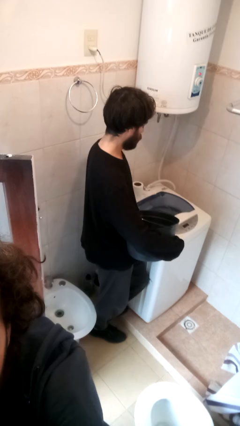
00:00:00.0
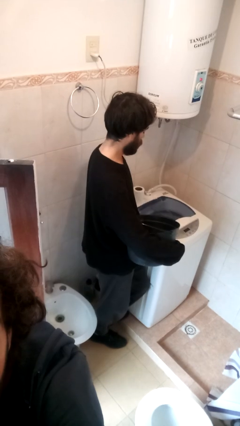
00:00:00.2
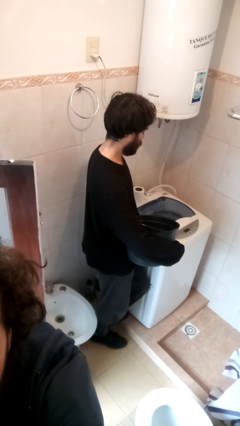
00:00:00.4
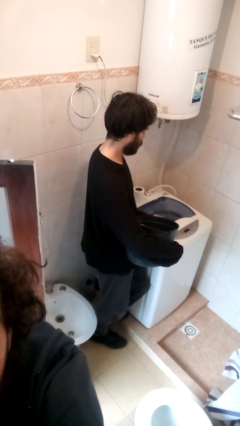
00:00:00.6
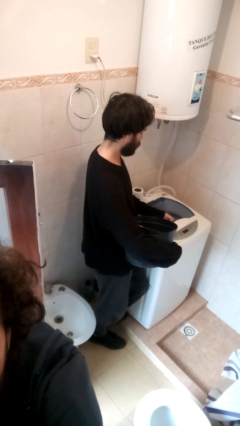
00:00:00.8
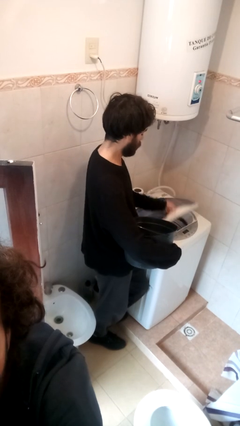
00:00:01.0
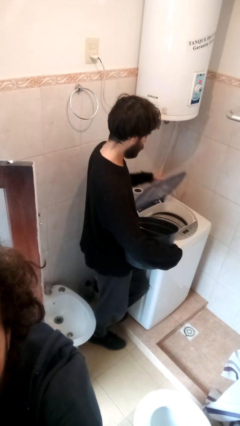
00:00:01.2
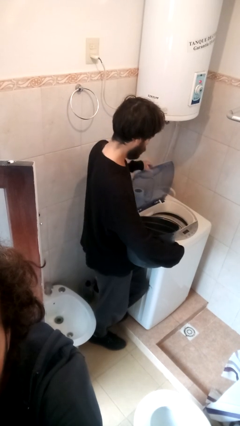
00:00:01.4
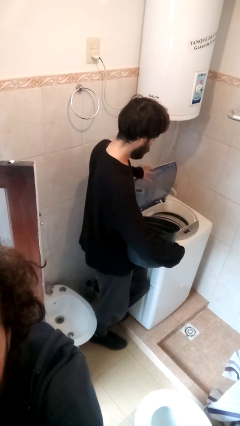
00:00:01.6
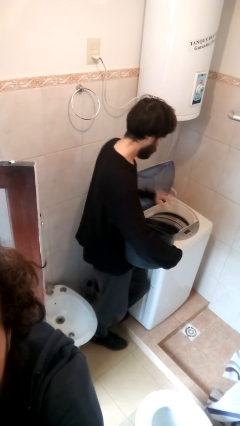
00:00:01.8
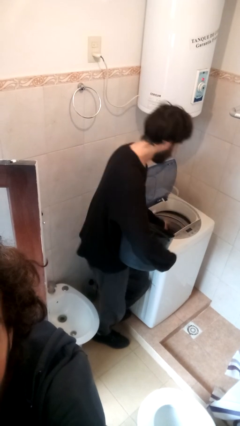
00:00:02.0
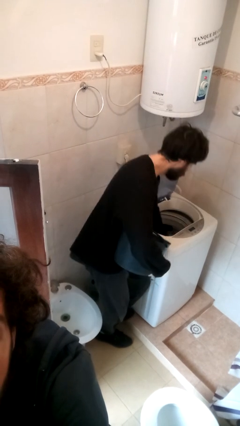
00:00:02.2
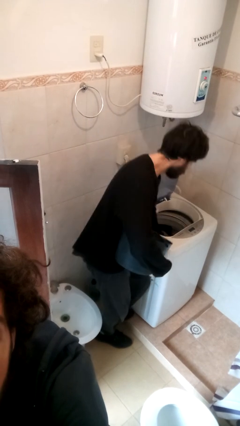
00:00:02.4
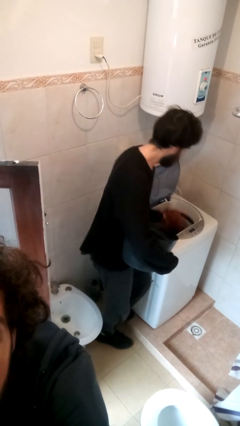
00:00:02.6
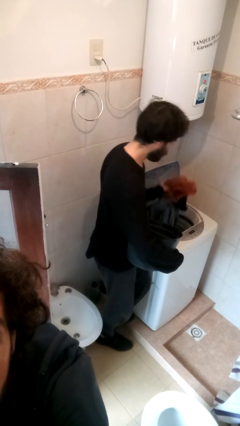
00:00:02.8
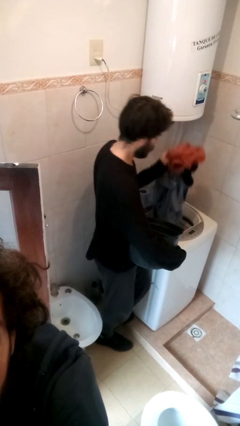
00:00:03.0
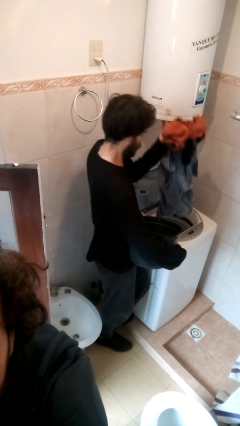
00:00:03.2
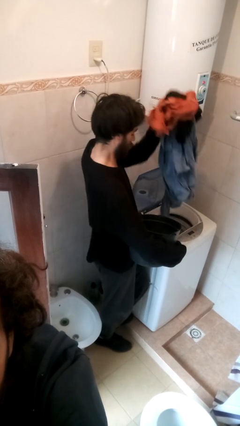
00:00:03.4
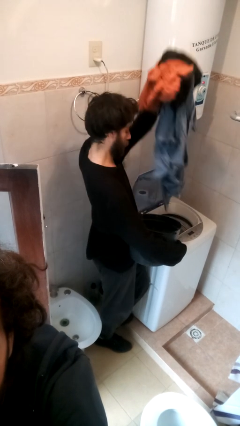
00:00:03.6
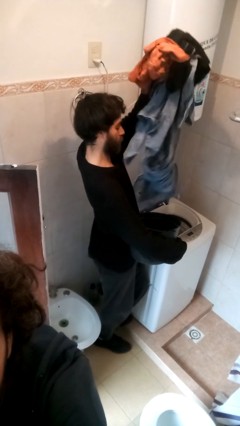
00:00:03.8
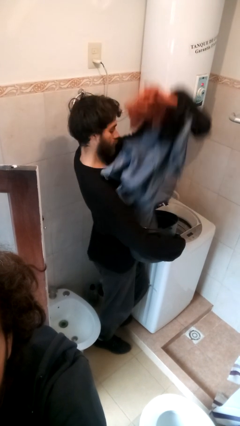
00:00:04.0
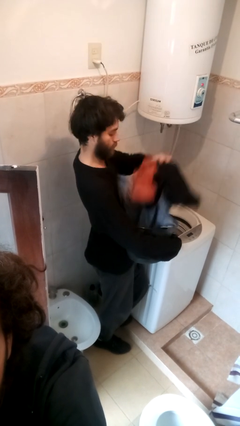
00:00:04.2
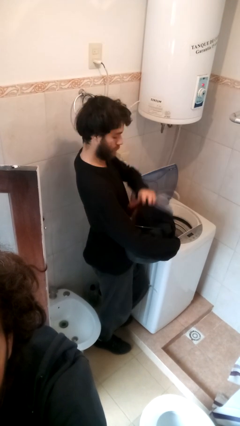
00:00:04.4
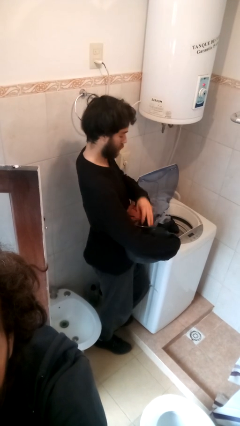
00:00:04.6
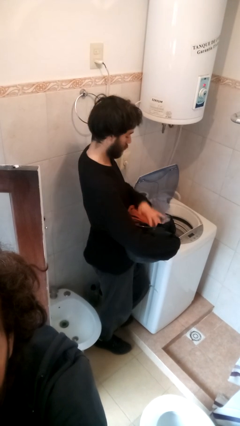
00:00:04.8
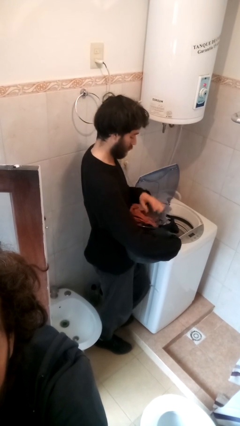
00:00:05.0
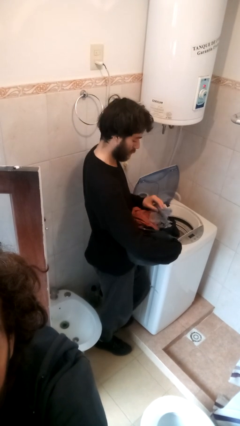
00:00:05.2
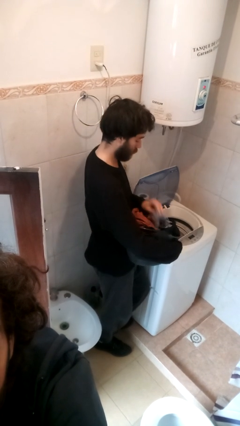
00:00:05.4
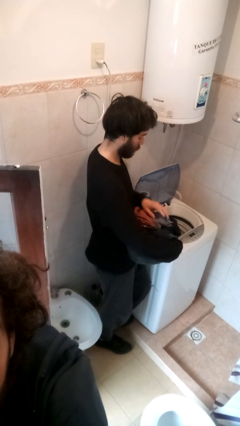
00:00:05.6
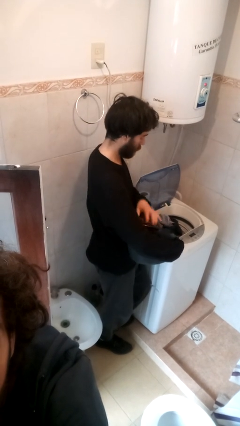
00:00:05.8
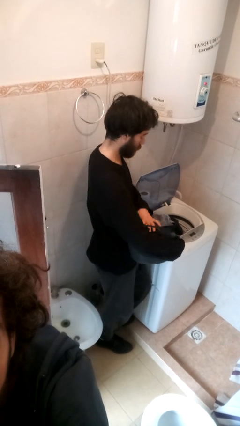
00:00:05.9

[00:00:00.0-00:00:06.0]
person loads clotheswasher

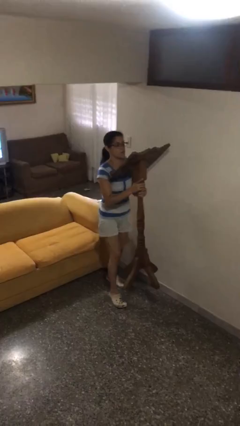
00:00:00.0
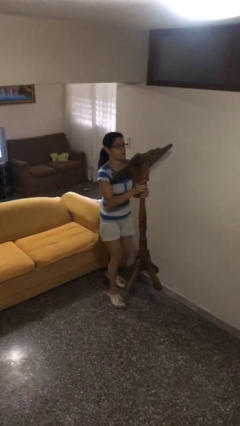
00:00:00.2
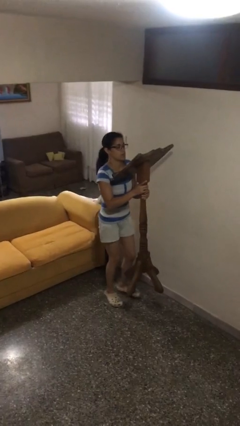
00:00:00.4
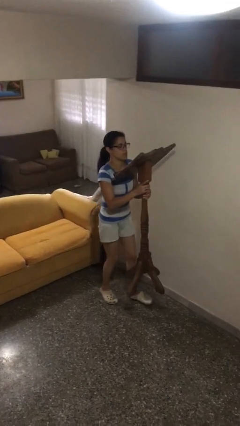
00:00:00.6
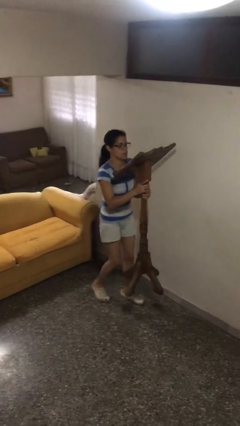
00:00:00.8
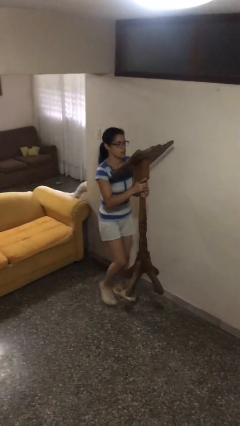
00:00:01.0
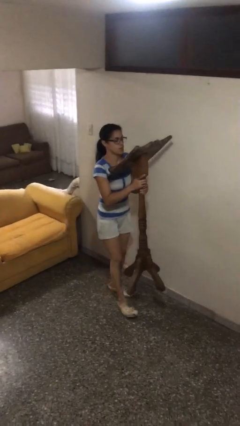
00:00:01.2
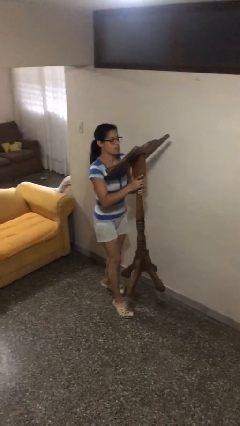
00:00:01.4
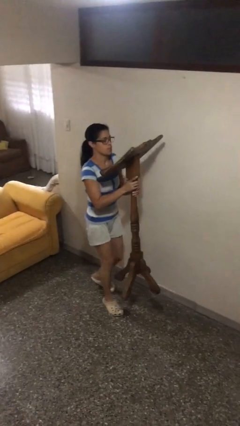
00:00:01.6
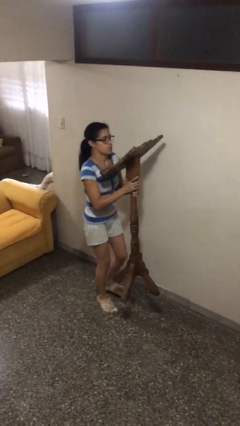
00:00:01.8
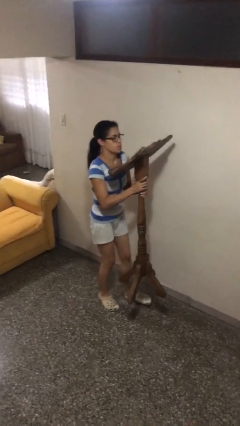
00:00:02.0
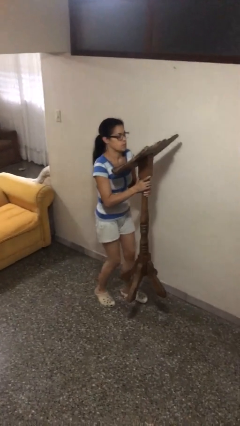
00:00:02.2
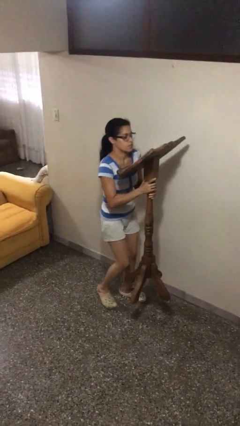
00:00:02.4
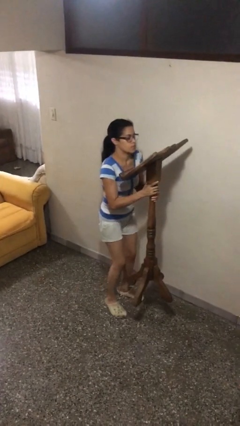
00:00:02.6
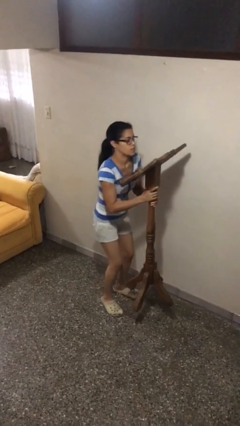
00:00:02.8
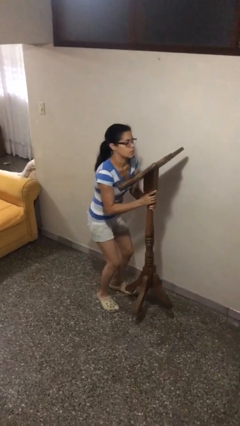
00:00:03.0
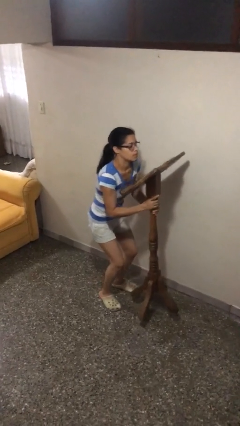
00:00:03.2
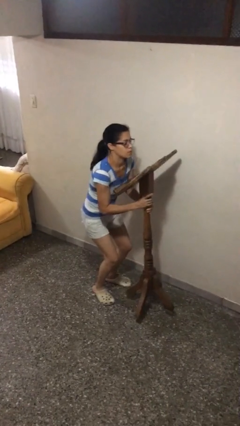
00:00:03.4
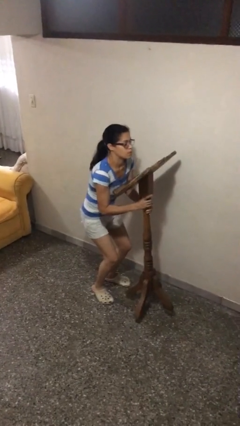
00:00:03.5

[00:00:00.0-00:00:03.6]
person carries heavy object

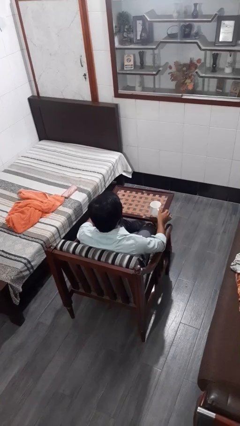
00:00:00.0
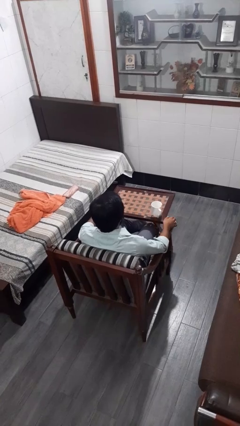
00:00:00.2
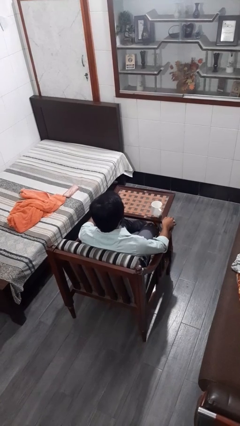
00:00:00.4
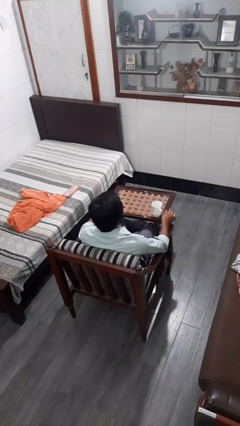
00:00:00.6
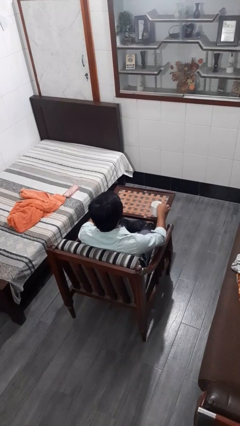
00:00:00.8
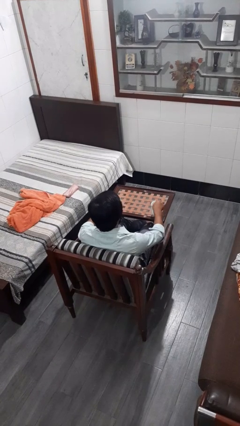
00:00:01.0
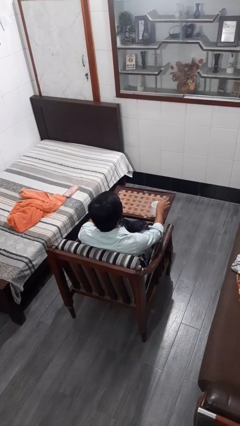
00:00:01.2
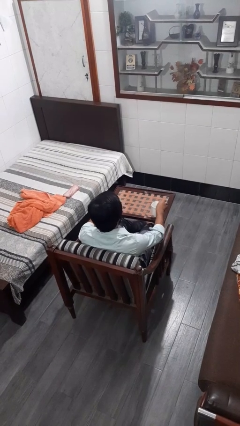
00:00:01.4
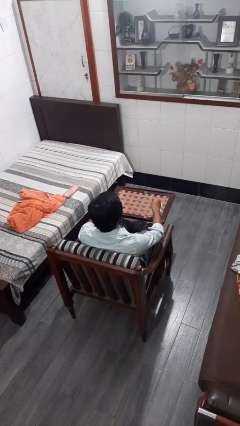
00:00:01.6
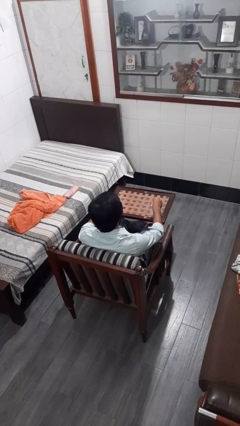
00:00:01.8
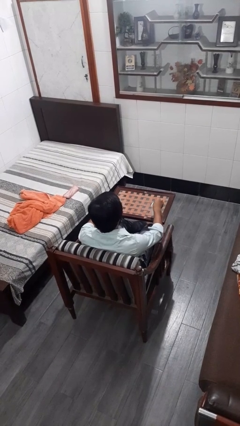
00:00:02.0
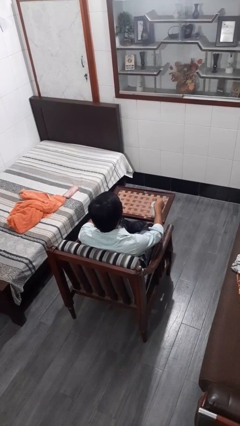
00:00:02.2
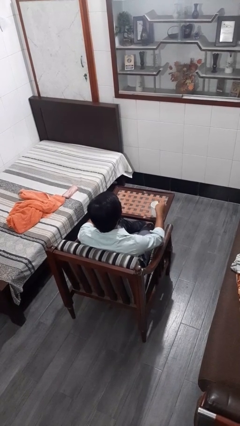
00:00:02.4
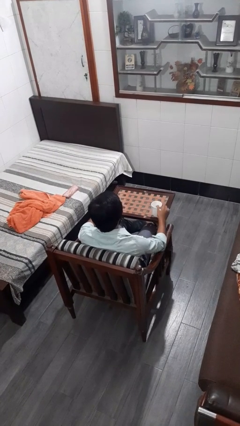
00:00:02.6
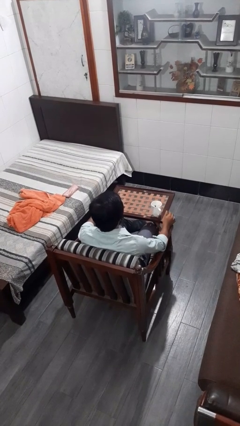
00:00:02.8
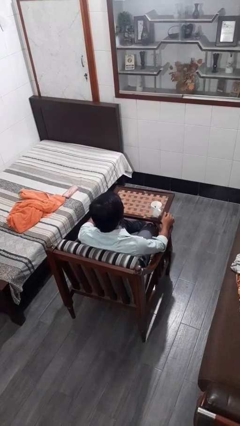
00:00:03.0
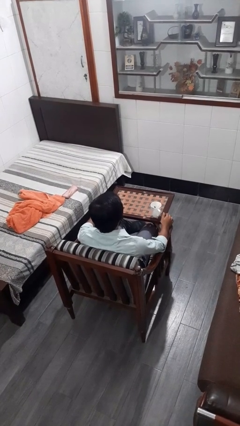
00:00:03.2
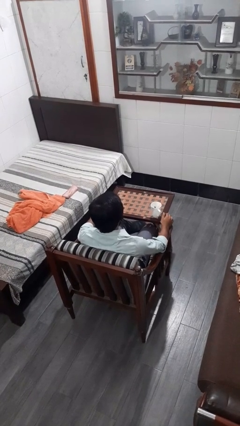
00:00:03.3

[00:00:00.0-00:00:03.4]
person stirs mug

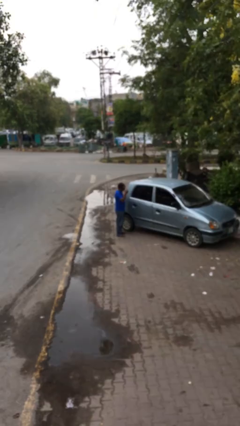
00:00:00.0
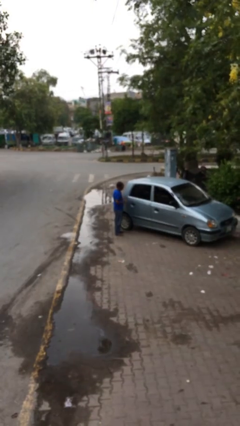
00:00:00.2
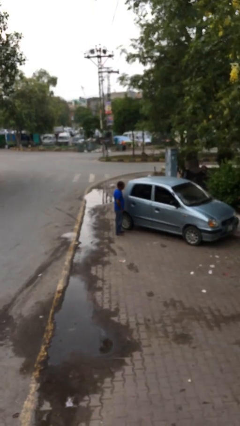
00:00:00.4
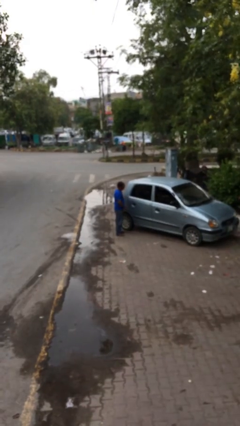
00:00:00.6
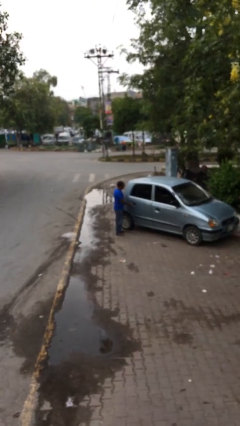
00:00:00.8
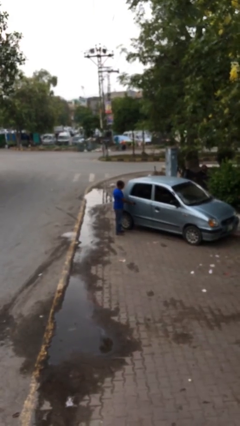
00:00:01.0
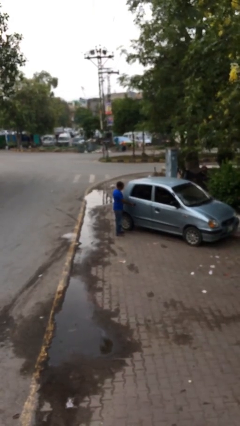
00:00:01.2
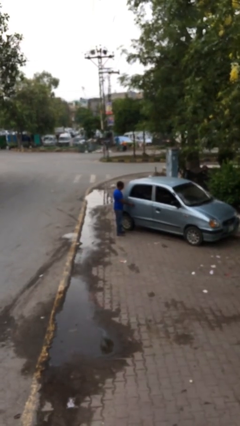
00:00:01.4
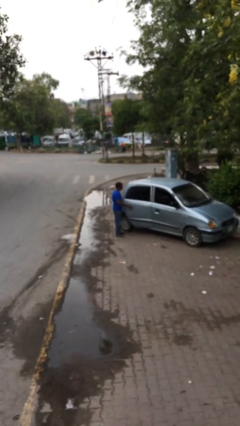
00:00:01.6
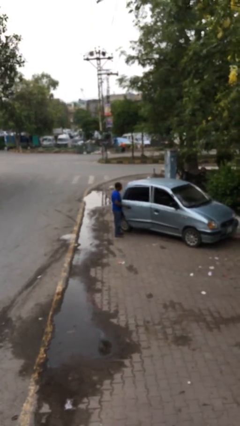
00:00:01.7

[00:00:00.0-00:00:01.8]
person opens car door

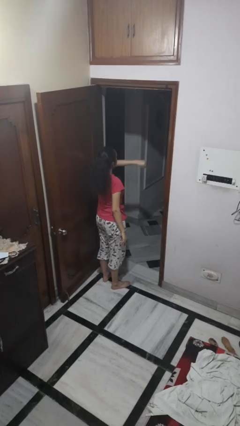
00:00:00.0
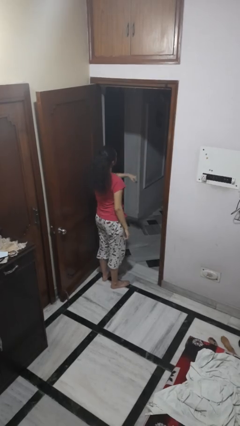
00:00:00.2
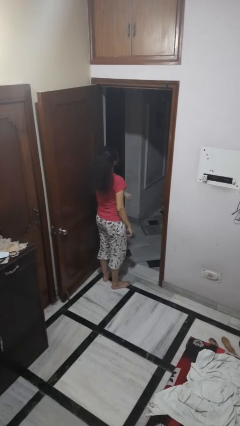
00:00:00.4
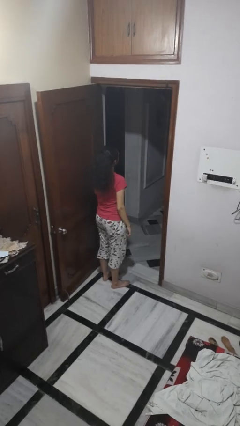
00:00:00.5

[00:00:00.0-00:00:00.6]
person punches

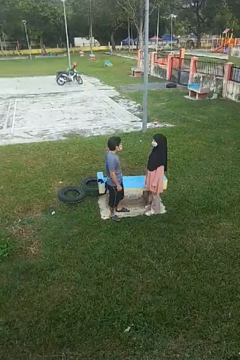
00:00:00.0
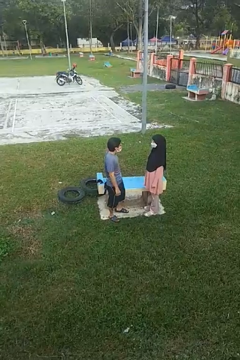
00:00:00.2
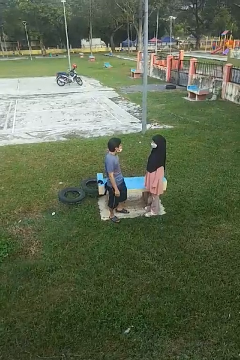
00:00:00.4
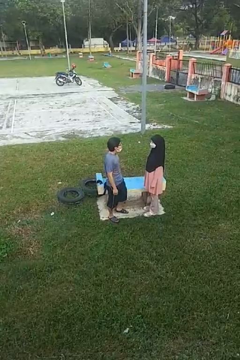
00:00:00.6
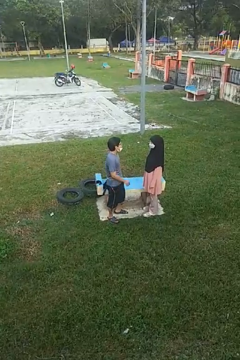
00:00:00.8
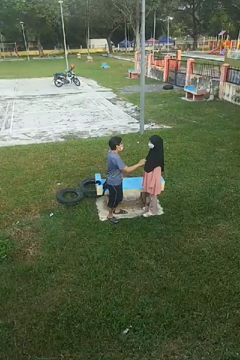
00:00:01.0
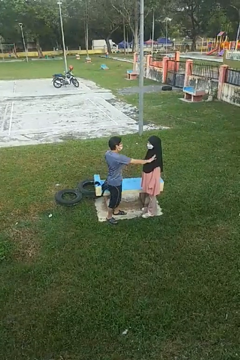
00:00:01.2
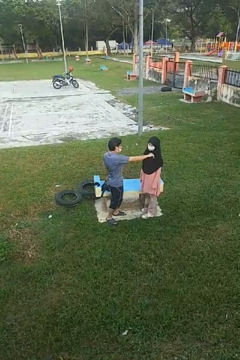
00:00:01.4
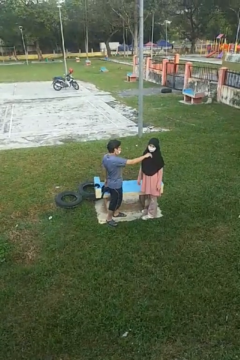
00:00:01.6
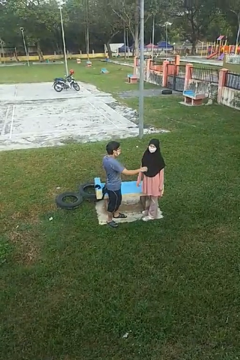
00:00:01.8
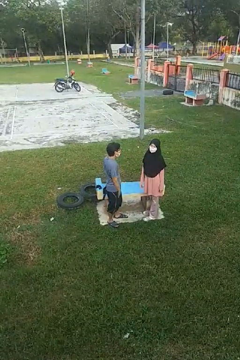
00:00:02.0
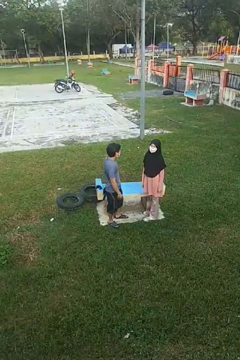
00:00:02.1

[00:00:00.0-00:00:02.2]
person shoves person

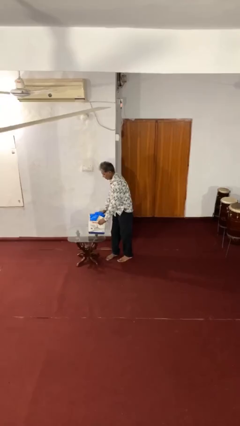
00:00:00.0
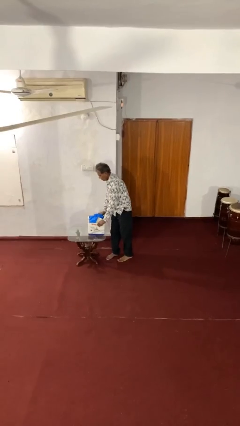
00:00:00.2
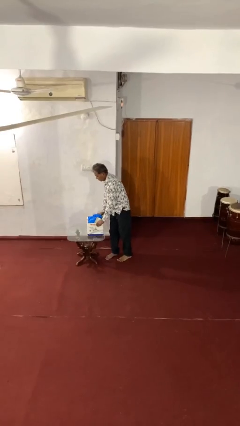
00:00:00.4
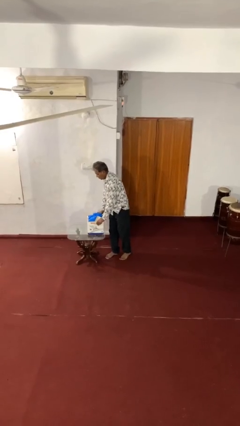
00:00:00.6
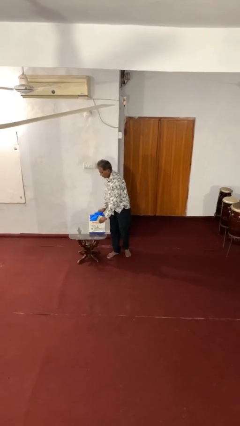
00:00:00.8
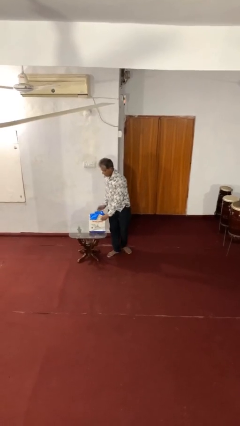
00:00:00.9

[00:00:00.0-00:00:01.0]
person puts down object on table
